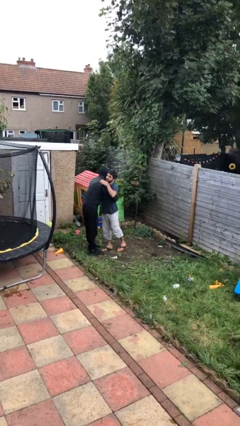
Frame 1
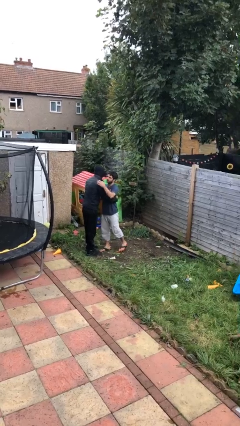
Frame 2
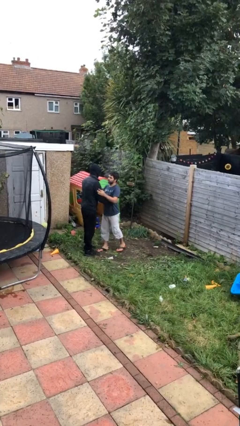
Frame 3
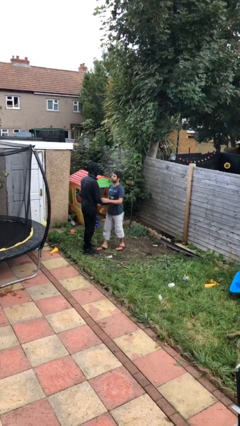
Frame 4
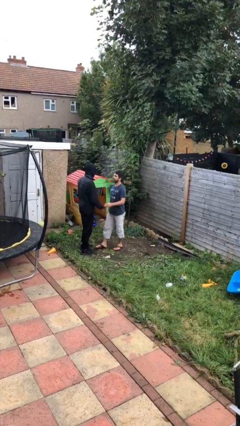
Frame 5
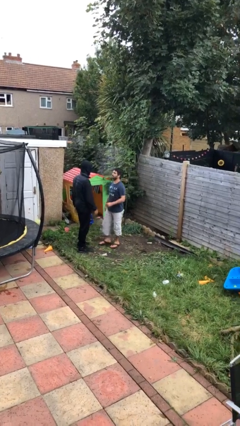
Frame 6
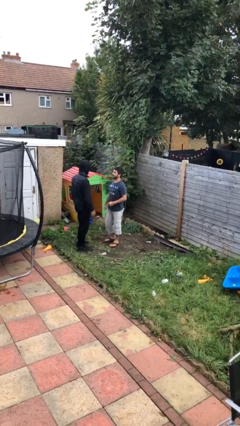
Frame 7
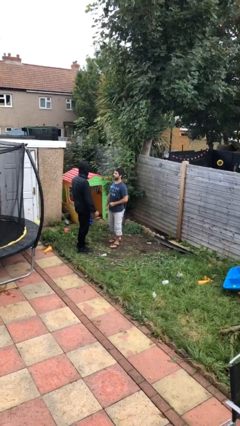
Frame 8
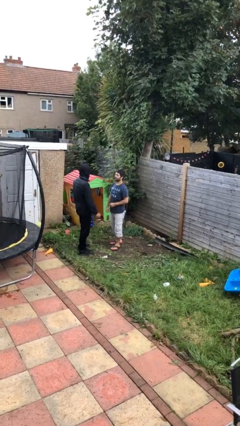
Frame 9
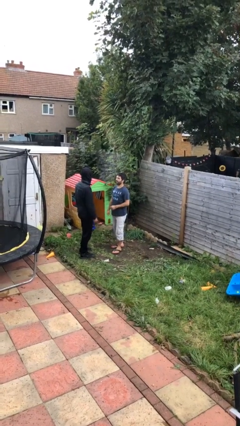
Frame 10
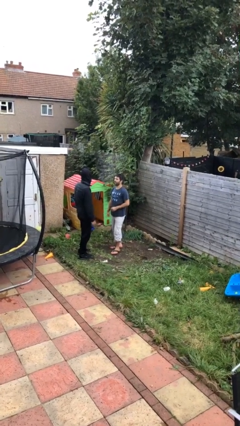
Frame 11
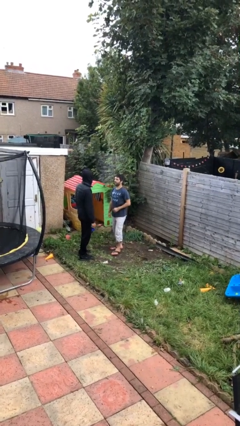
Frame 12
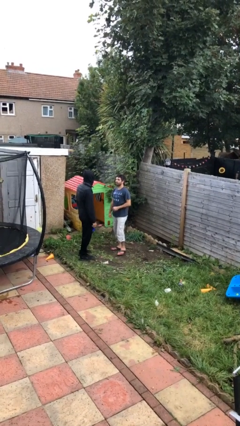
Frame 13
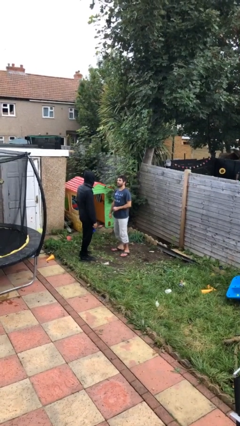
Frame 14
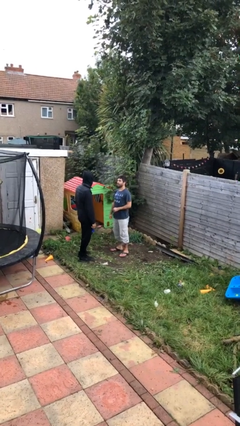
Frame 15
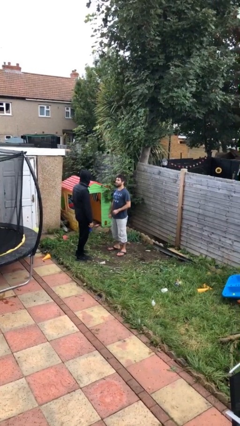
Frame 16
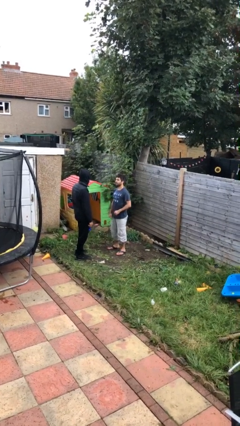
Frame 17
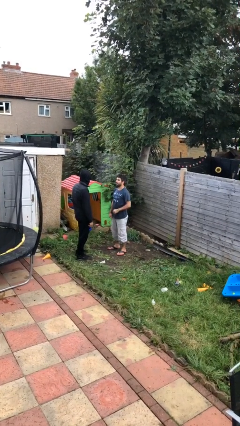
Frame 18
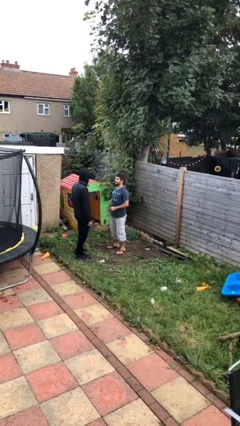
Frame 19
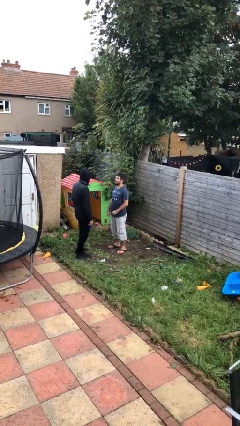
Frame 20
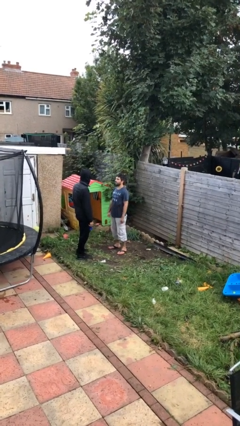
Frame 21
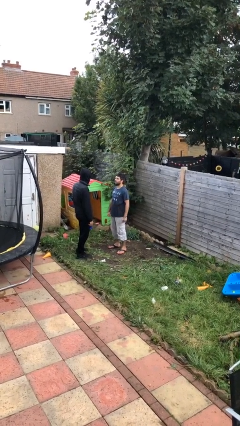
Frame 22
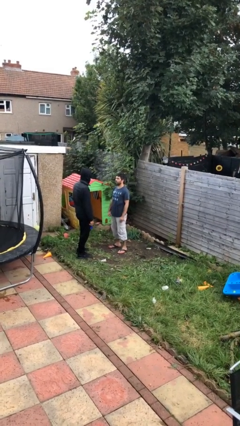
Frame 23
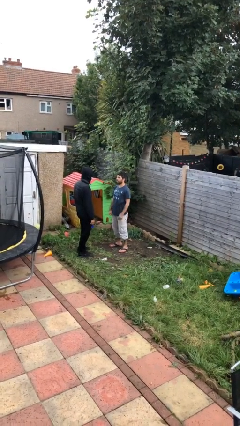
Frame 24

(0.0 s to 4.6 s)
person talks to person

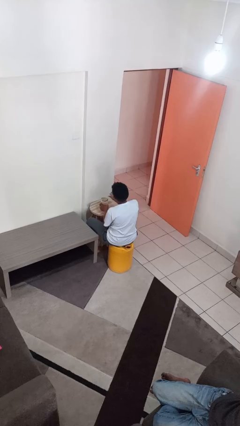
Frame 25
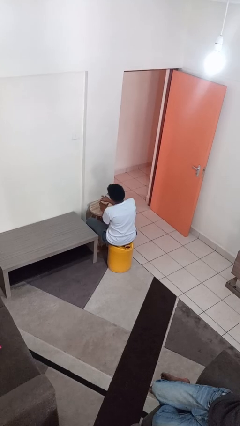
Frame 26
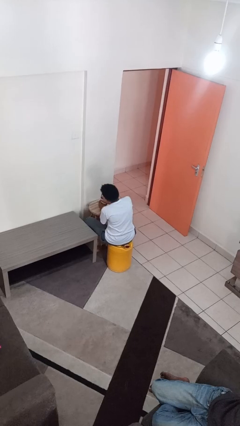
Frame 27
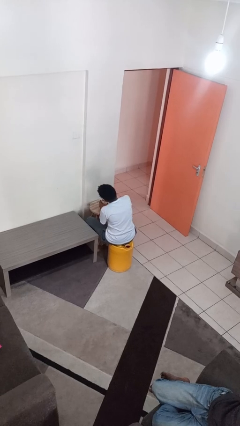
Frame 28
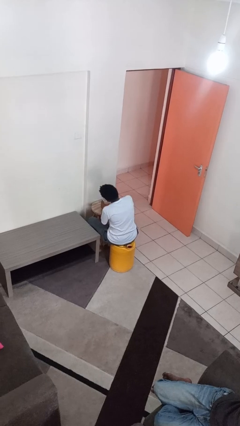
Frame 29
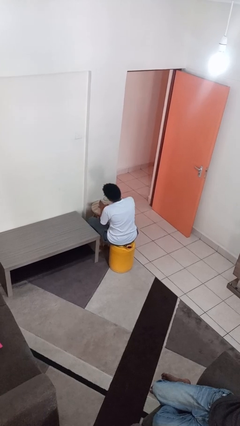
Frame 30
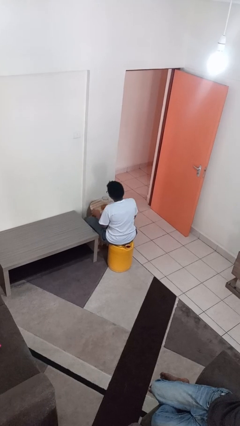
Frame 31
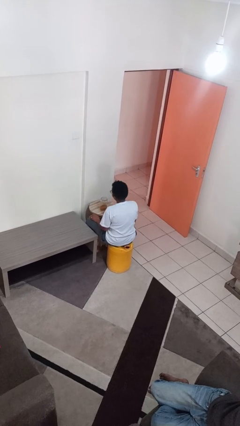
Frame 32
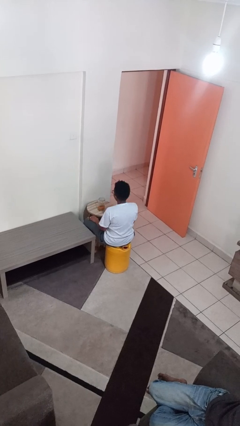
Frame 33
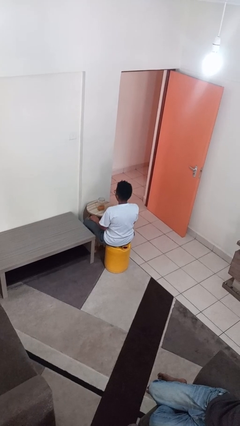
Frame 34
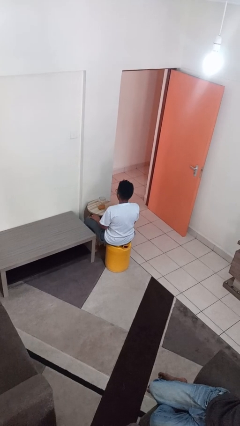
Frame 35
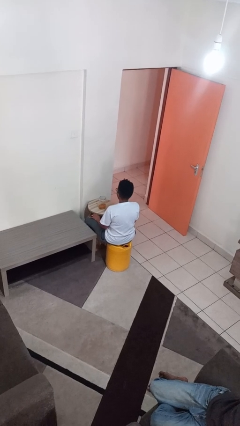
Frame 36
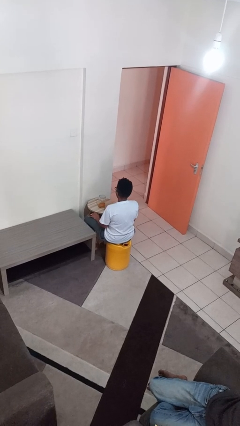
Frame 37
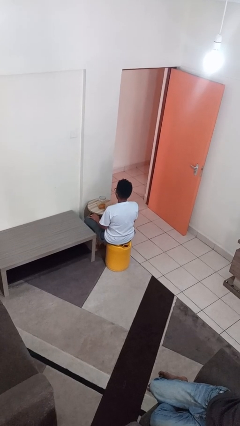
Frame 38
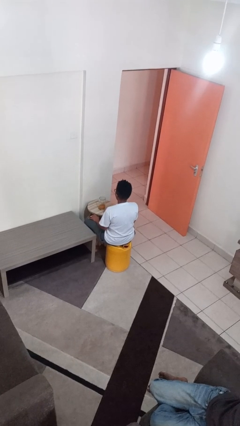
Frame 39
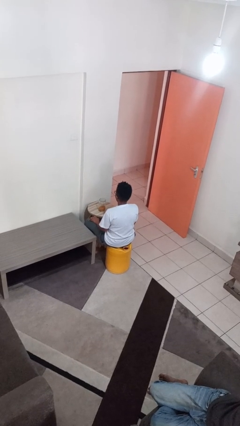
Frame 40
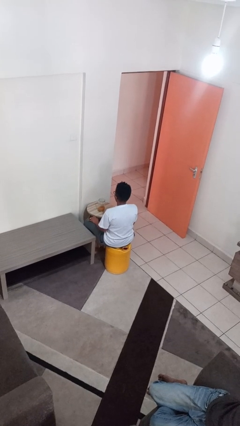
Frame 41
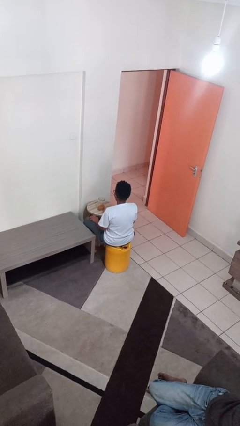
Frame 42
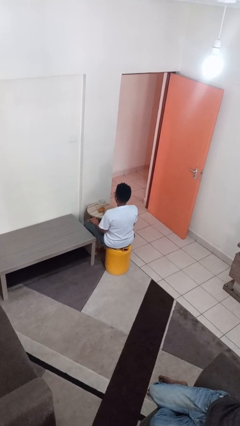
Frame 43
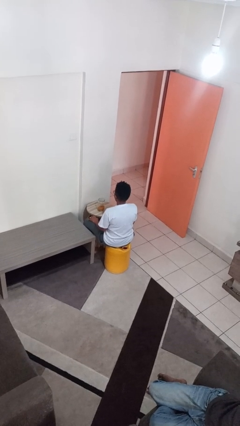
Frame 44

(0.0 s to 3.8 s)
person opens jar

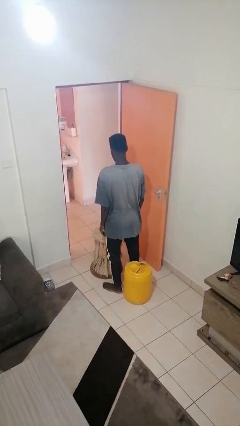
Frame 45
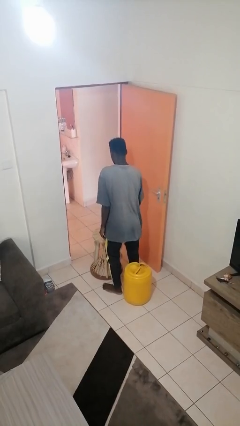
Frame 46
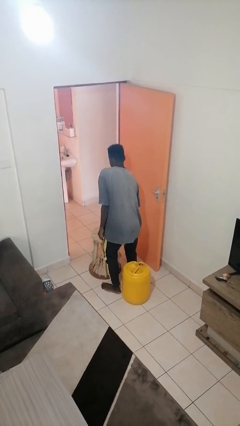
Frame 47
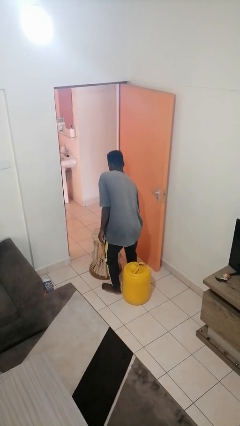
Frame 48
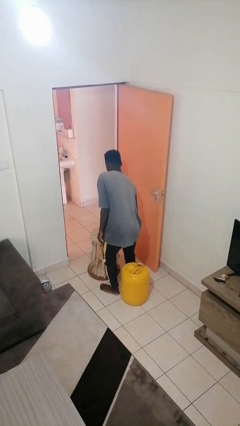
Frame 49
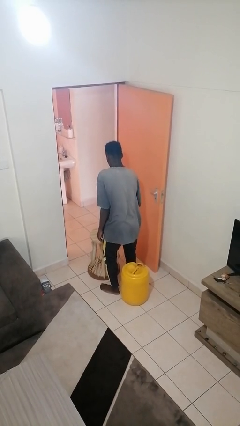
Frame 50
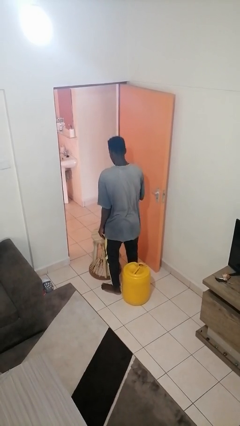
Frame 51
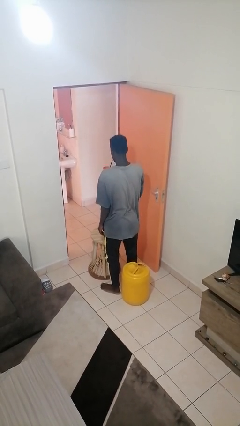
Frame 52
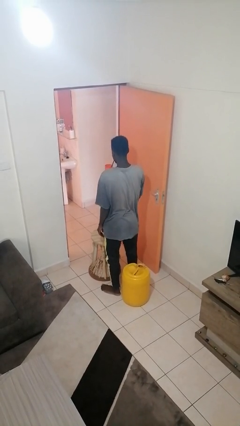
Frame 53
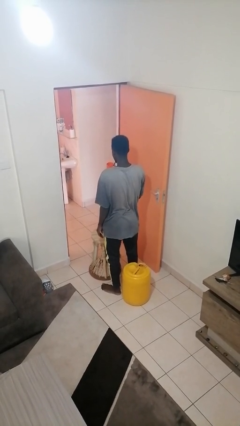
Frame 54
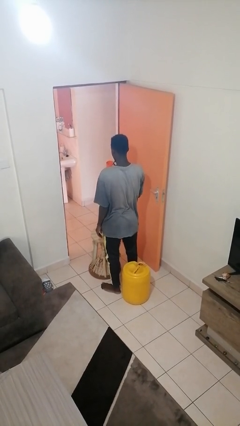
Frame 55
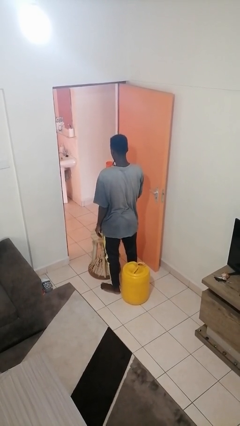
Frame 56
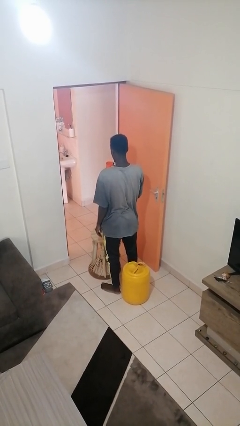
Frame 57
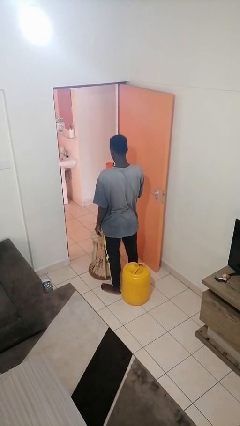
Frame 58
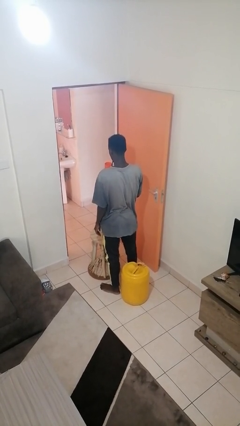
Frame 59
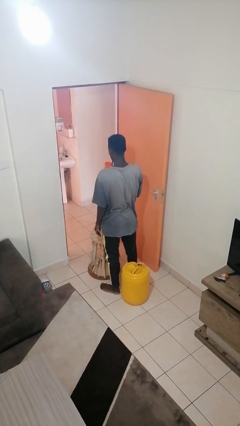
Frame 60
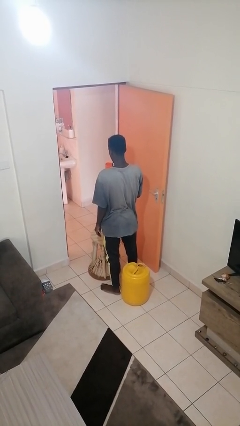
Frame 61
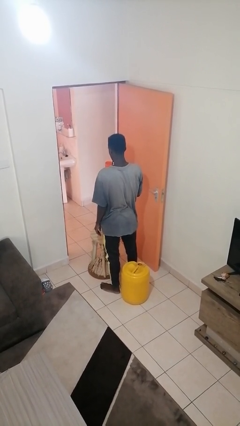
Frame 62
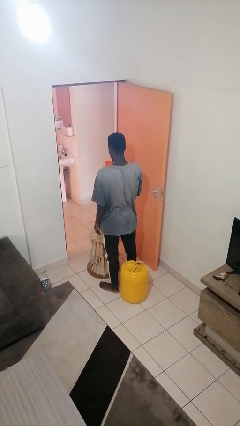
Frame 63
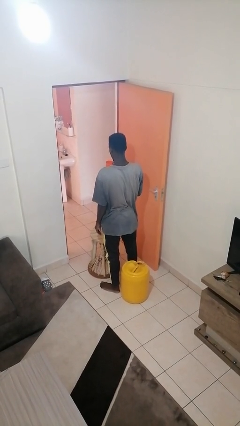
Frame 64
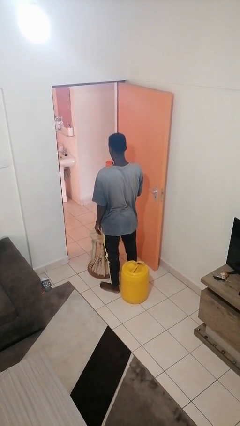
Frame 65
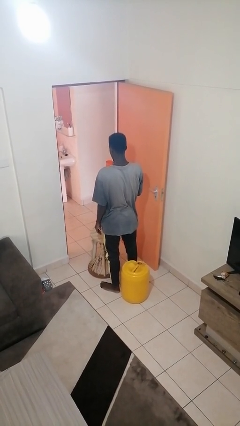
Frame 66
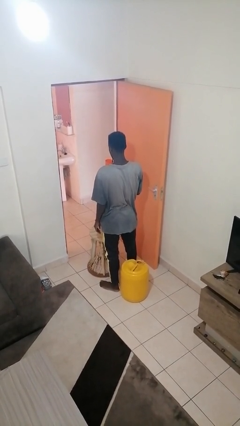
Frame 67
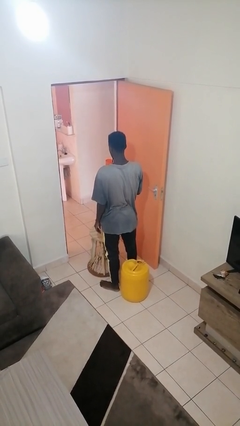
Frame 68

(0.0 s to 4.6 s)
person drinks from straw

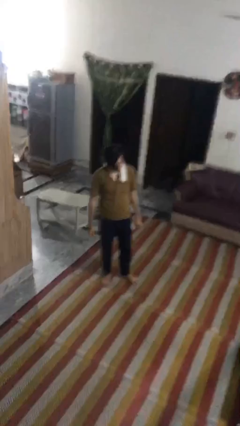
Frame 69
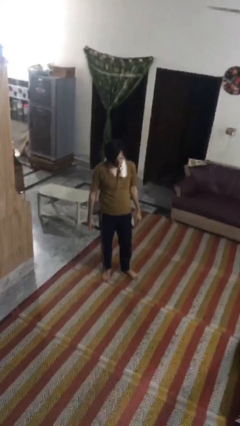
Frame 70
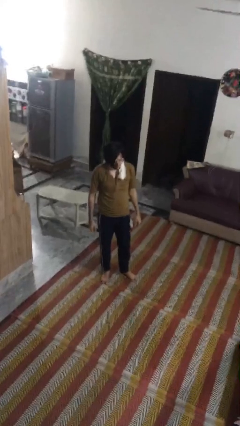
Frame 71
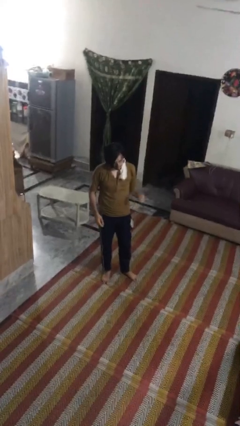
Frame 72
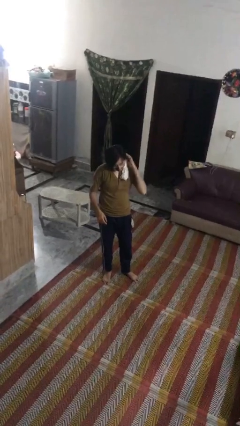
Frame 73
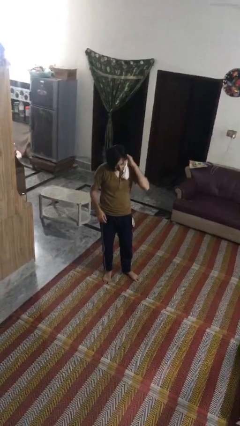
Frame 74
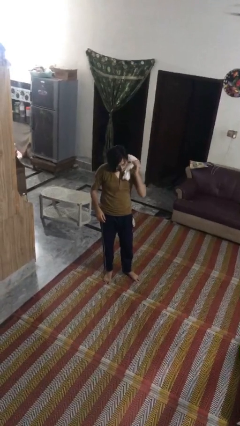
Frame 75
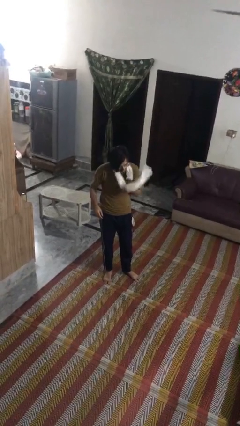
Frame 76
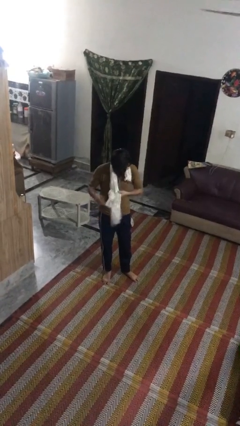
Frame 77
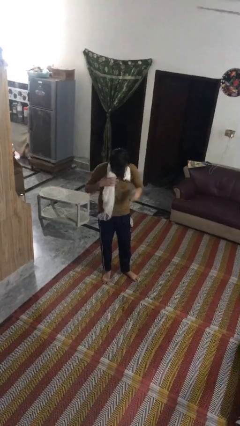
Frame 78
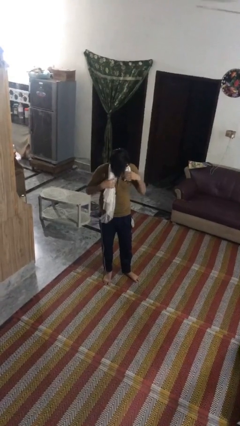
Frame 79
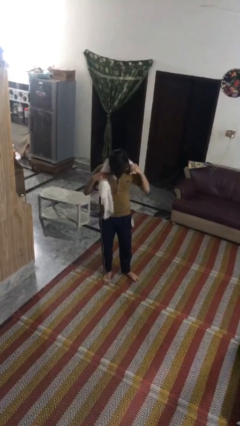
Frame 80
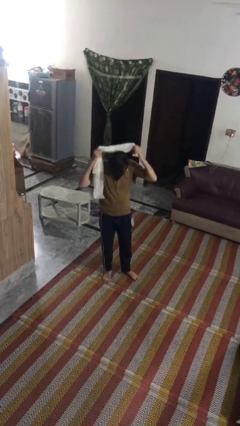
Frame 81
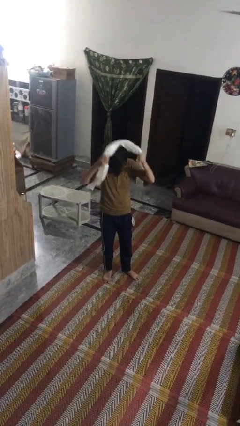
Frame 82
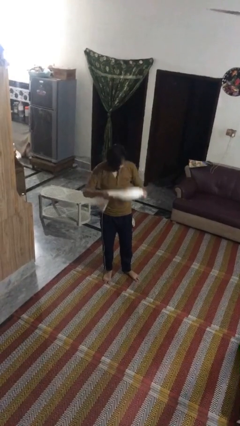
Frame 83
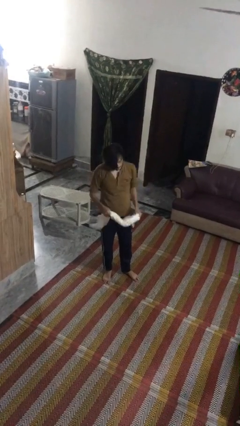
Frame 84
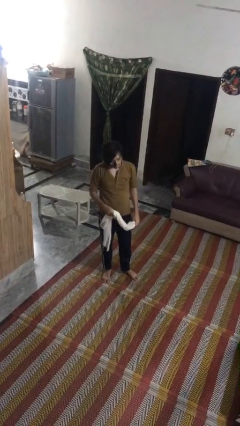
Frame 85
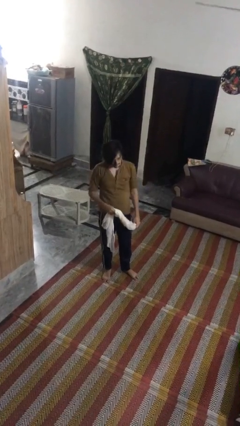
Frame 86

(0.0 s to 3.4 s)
person takes off scarf

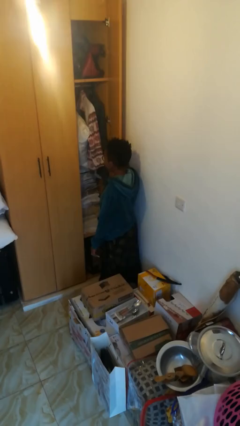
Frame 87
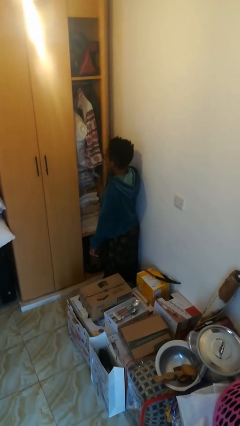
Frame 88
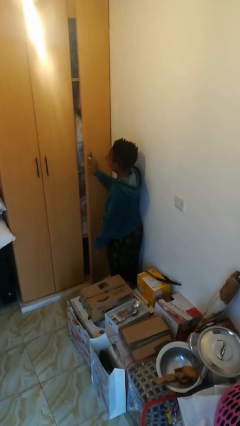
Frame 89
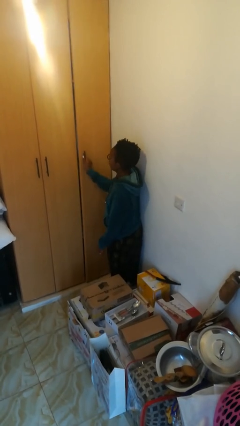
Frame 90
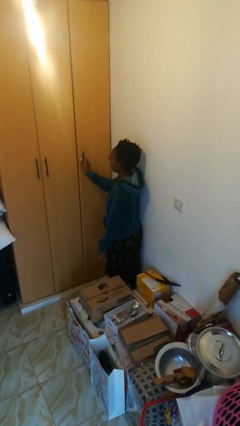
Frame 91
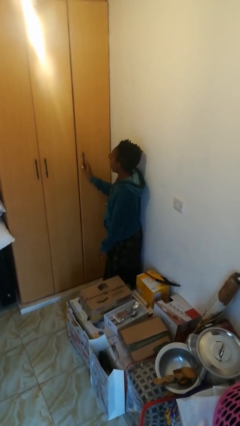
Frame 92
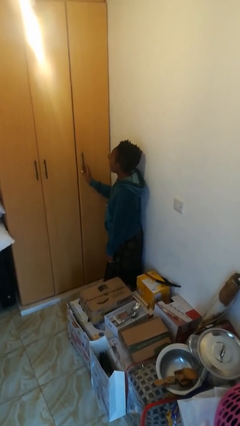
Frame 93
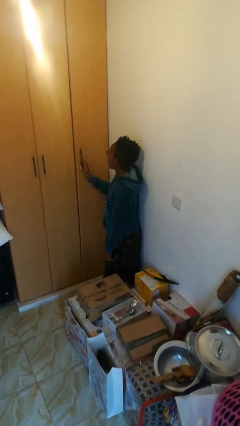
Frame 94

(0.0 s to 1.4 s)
person closes closet door
